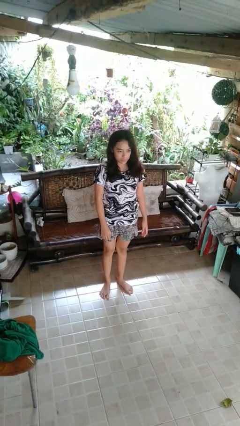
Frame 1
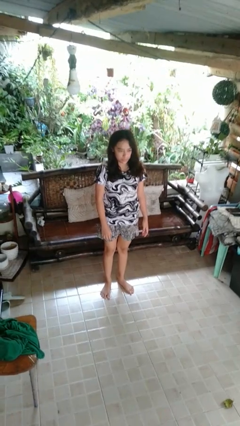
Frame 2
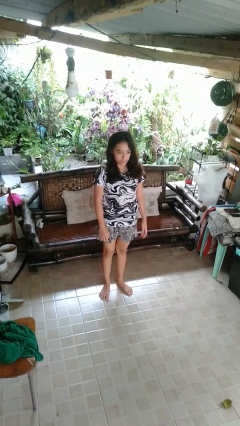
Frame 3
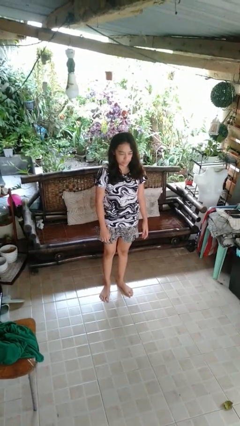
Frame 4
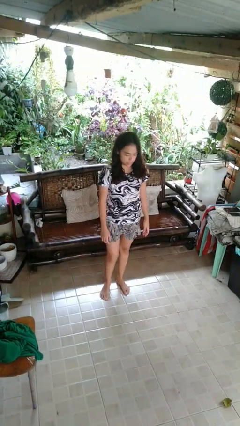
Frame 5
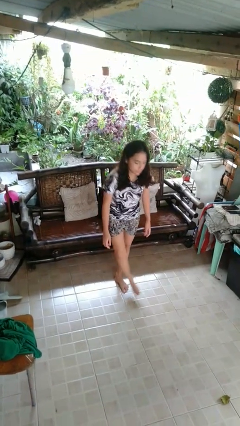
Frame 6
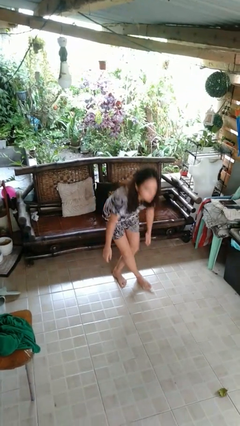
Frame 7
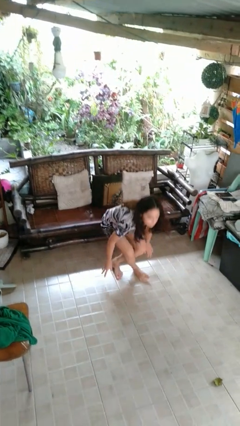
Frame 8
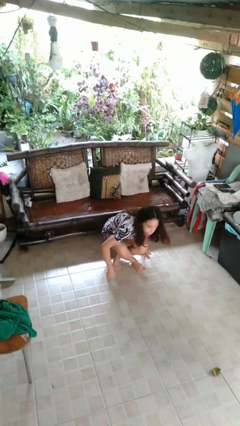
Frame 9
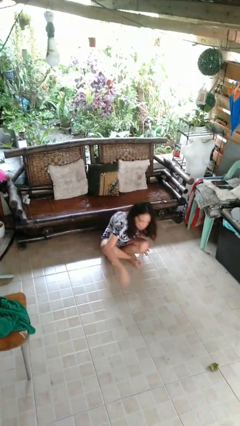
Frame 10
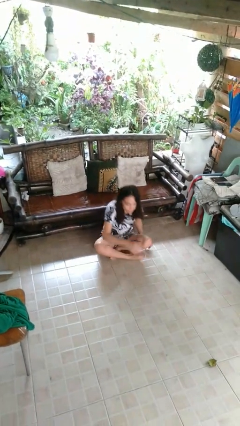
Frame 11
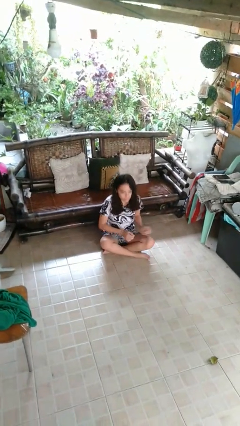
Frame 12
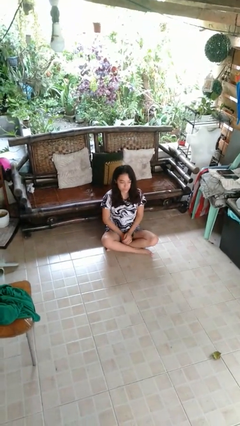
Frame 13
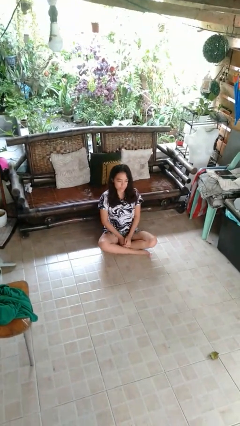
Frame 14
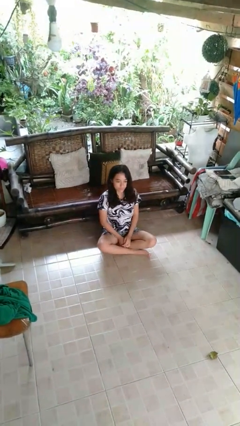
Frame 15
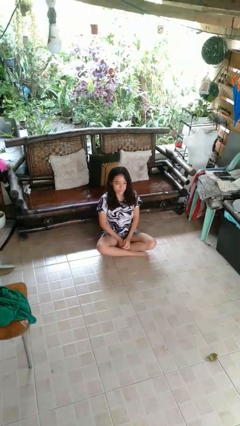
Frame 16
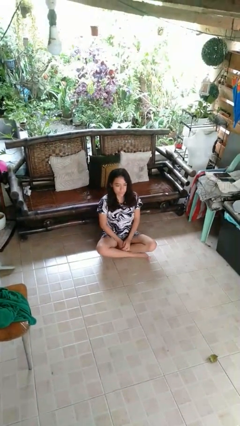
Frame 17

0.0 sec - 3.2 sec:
person sits crisscross

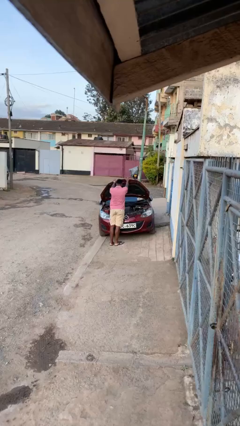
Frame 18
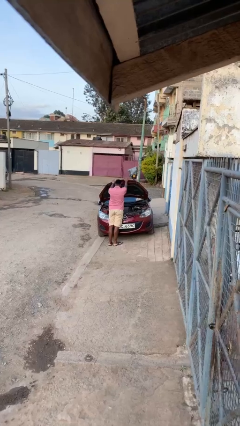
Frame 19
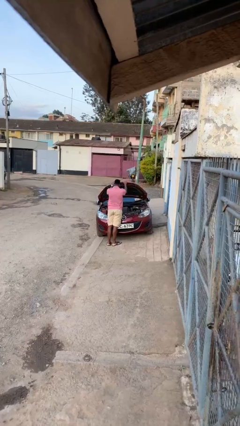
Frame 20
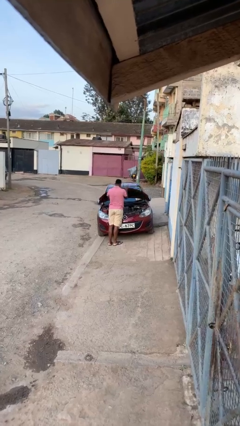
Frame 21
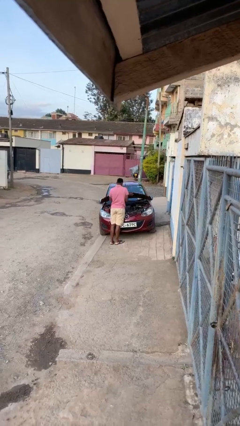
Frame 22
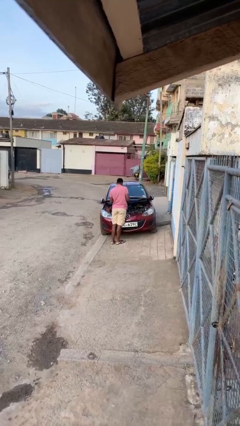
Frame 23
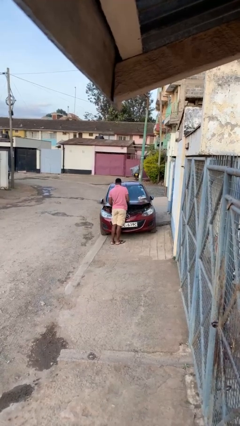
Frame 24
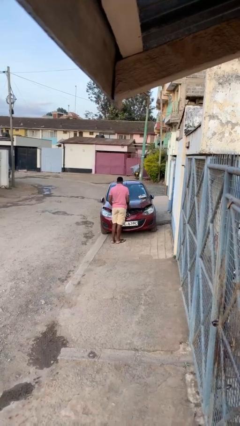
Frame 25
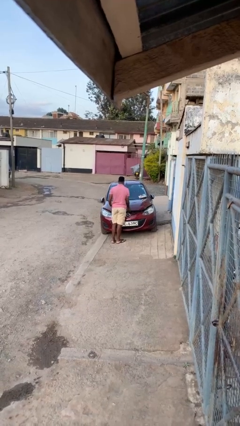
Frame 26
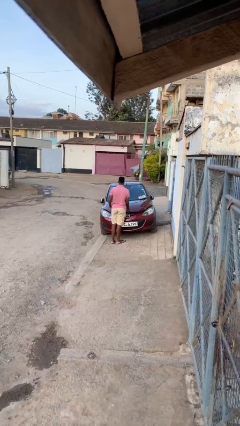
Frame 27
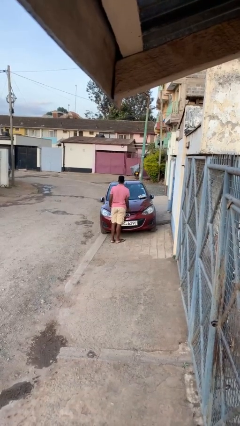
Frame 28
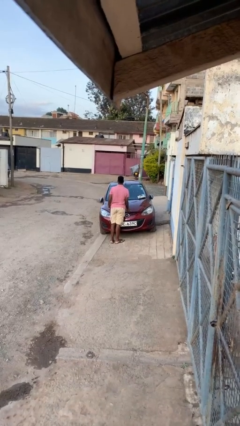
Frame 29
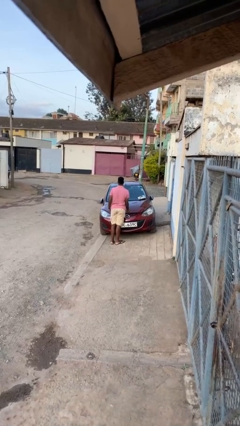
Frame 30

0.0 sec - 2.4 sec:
person closes car hood

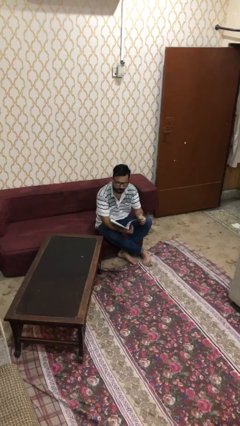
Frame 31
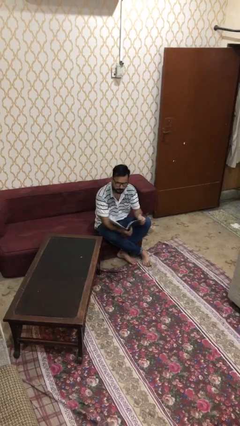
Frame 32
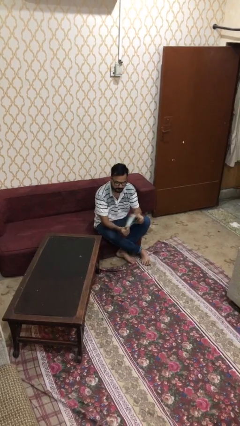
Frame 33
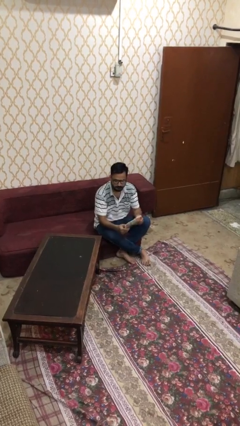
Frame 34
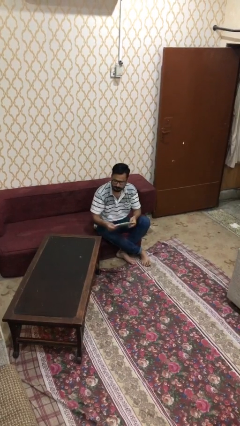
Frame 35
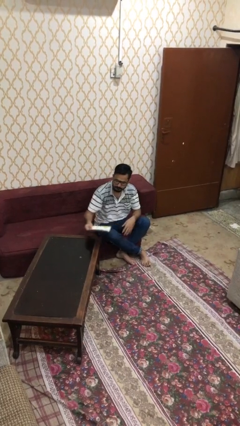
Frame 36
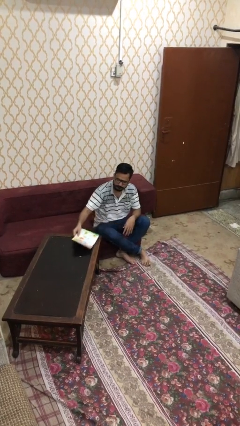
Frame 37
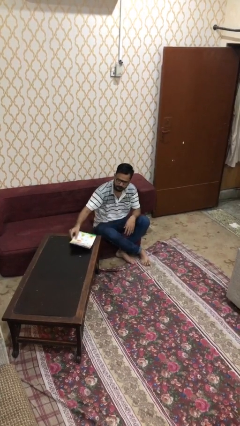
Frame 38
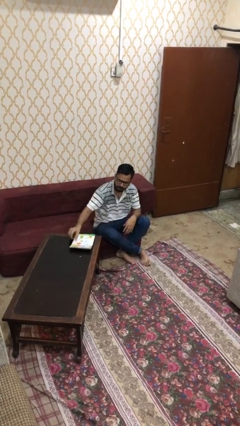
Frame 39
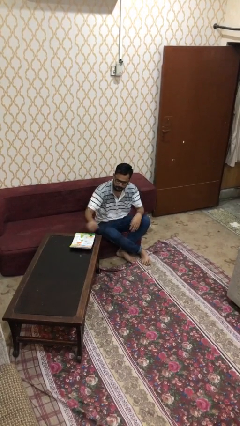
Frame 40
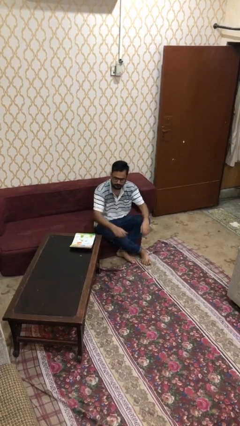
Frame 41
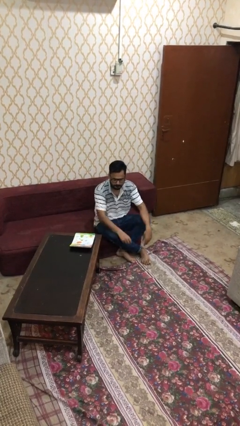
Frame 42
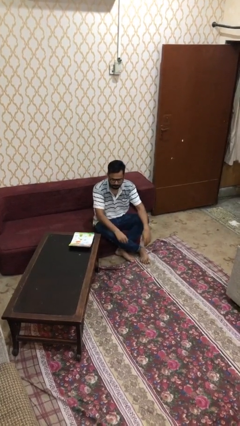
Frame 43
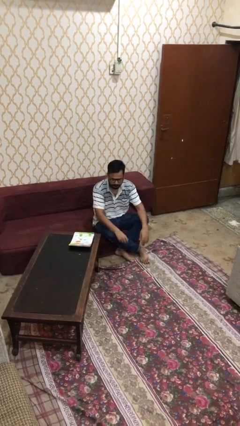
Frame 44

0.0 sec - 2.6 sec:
person puts down object on table

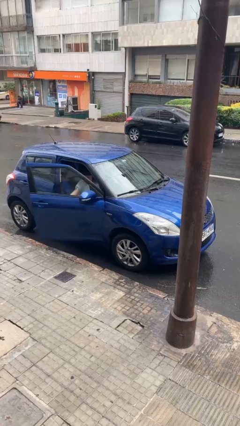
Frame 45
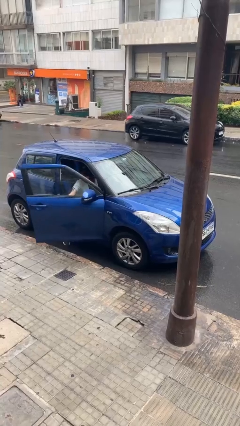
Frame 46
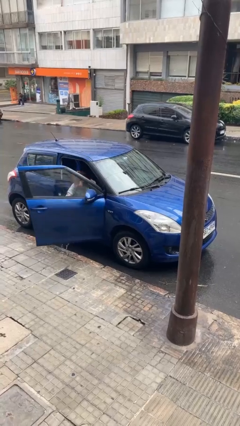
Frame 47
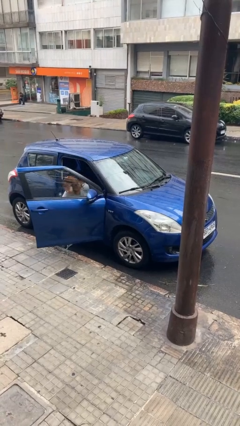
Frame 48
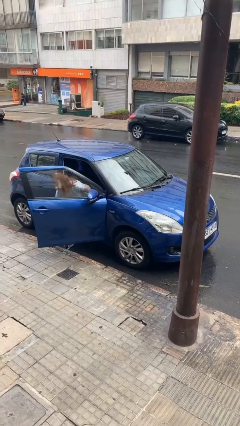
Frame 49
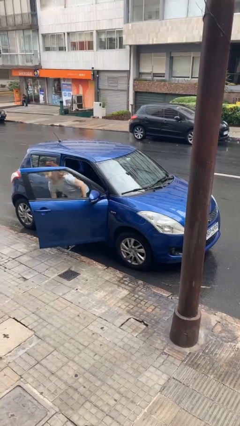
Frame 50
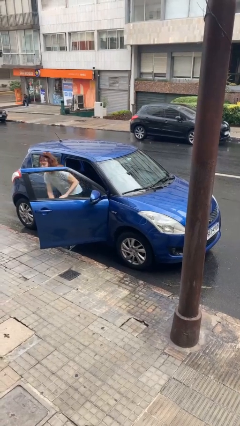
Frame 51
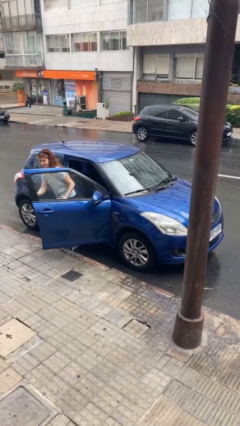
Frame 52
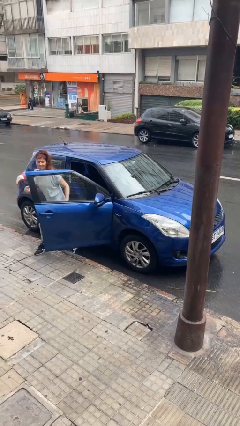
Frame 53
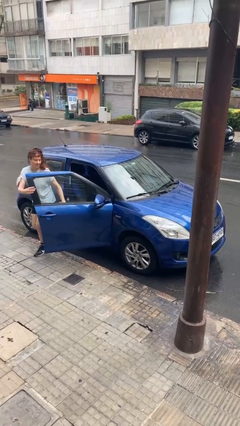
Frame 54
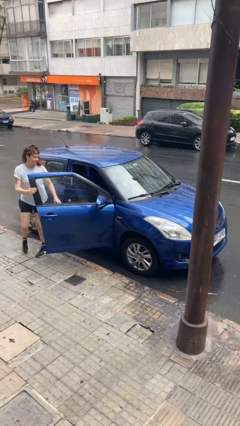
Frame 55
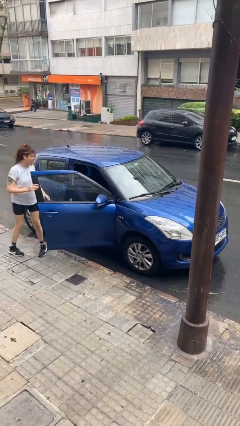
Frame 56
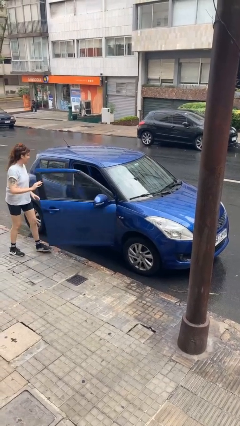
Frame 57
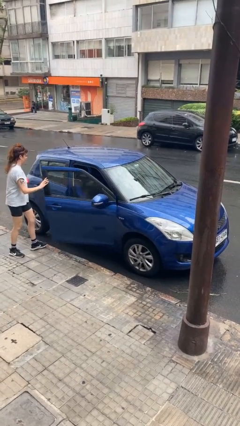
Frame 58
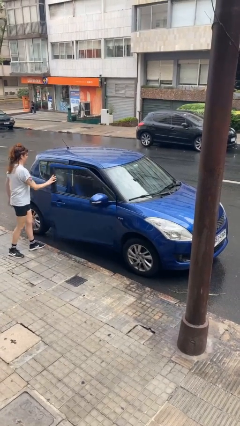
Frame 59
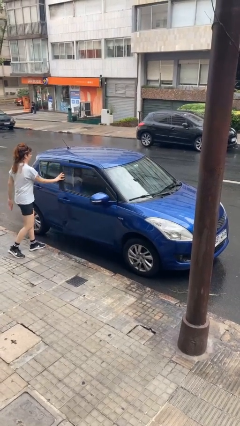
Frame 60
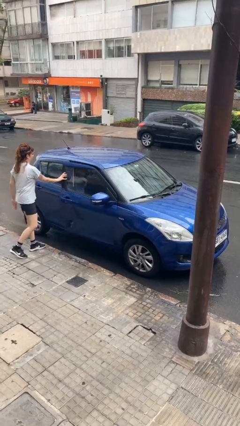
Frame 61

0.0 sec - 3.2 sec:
car drops off person

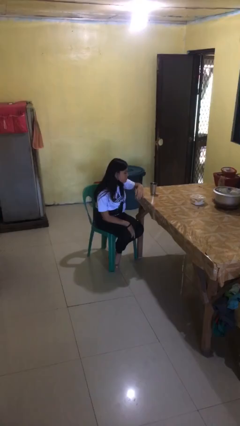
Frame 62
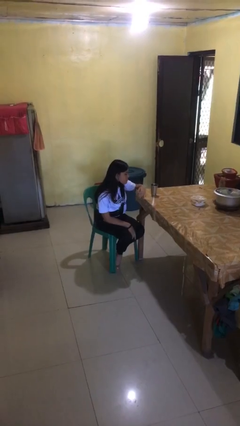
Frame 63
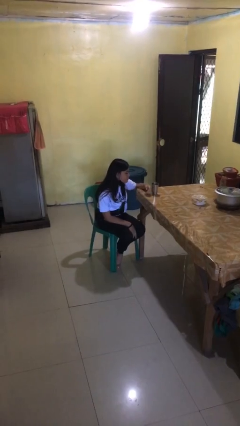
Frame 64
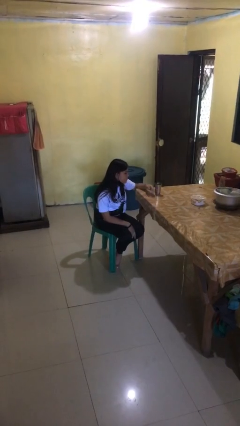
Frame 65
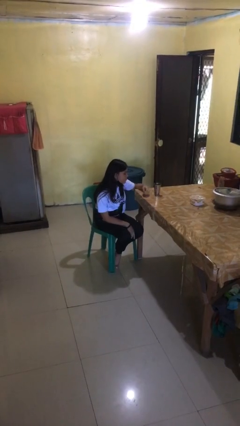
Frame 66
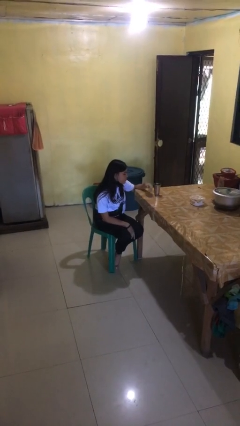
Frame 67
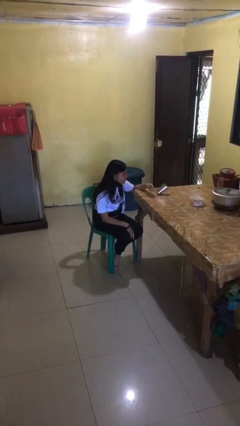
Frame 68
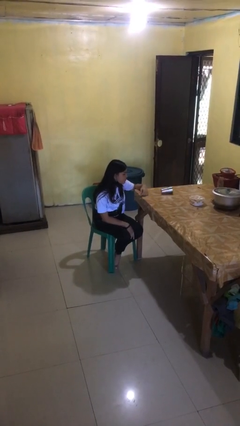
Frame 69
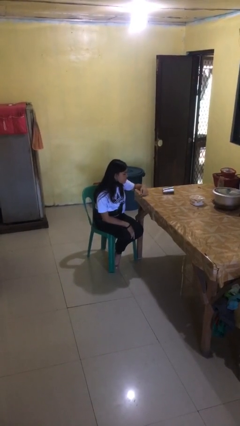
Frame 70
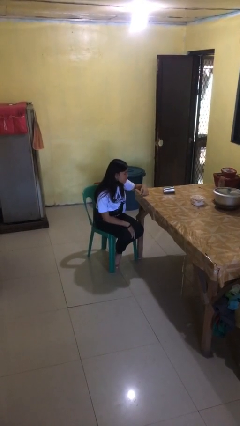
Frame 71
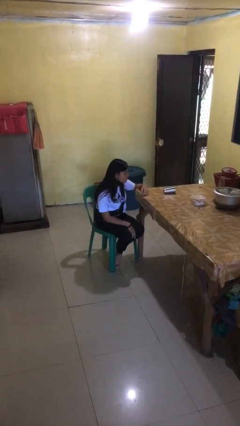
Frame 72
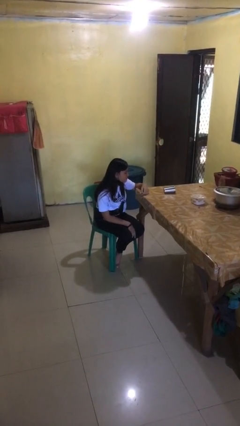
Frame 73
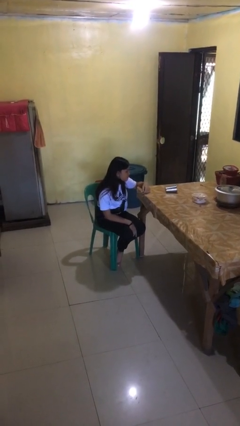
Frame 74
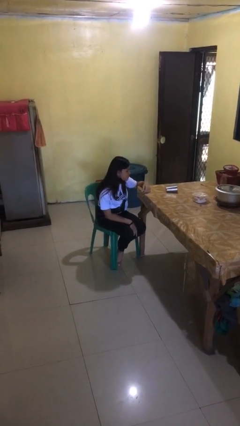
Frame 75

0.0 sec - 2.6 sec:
person knocks over glass

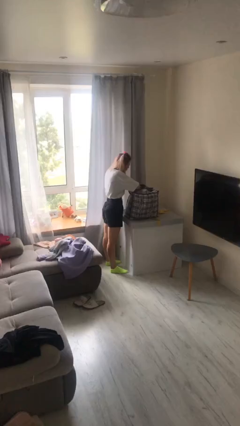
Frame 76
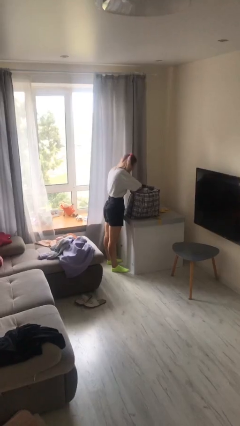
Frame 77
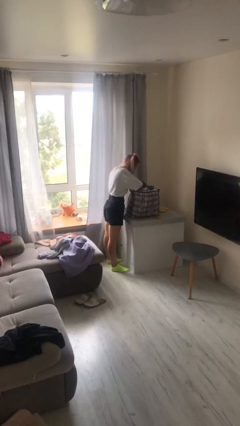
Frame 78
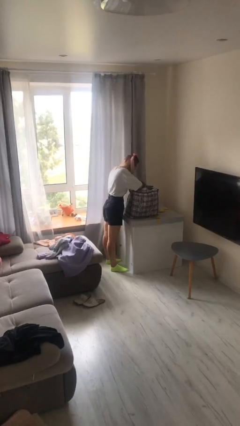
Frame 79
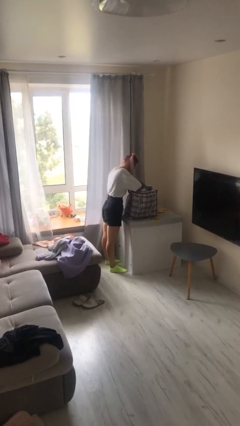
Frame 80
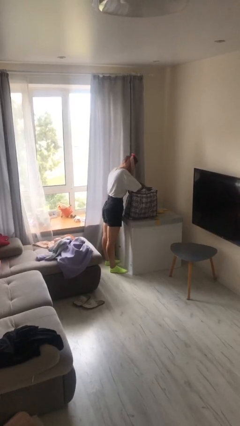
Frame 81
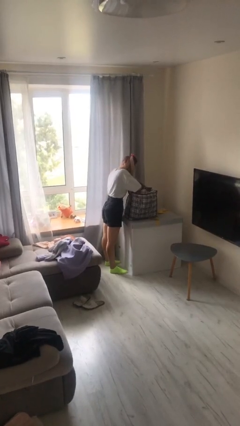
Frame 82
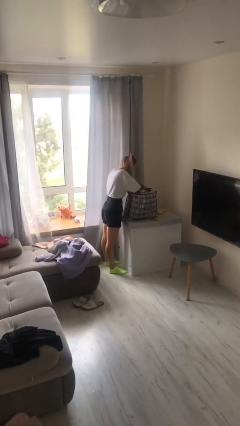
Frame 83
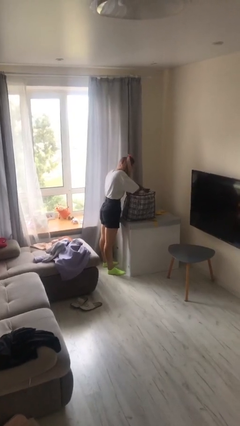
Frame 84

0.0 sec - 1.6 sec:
person searches in bag

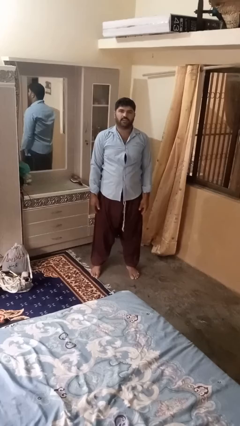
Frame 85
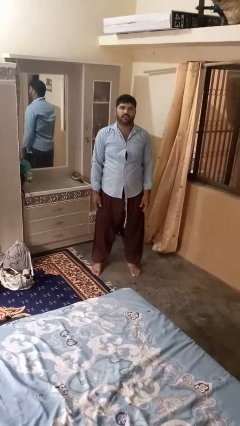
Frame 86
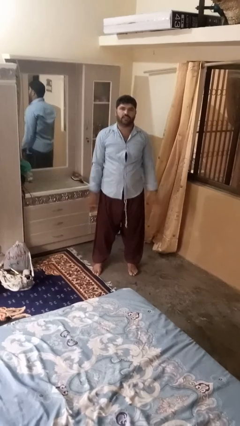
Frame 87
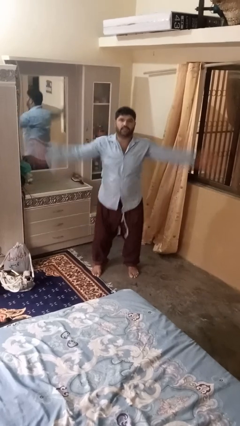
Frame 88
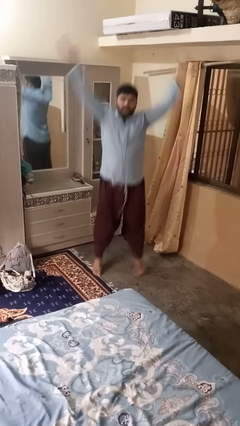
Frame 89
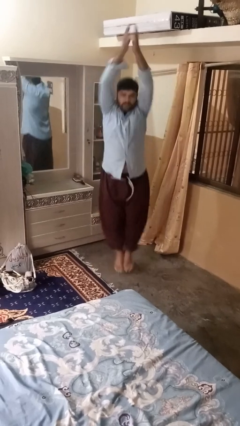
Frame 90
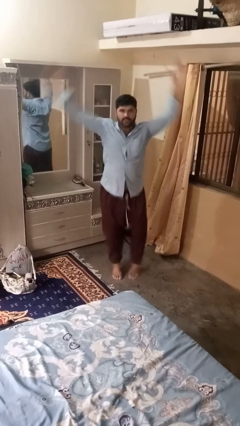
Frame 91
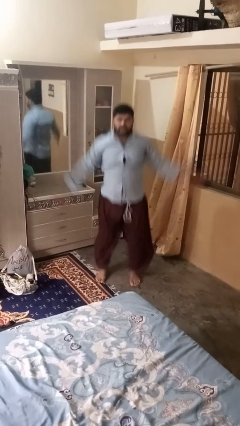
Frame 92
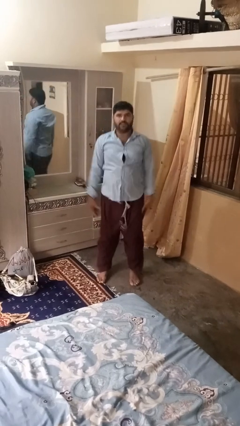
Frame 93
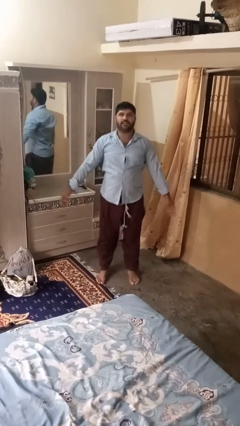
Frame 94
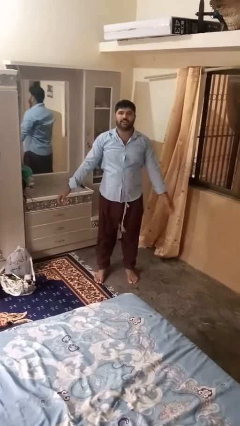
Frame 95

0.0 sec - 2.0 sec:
person exercises with jumping jacks
